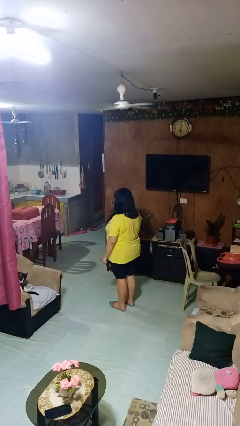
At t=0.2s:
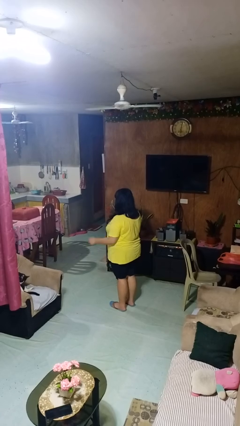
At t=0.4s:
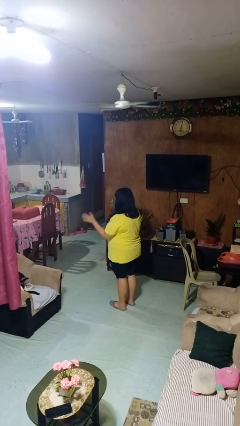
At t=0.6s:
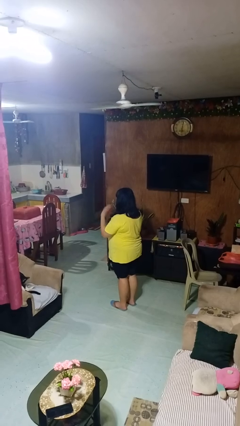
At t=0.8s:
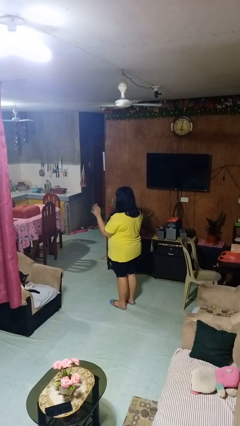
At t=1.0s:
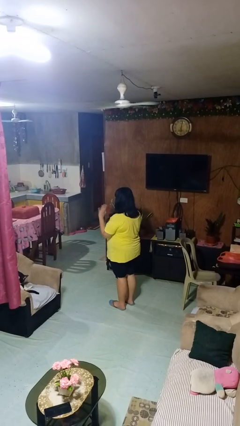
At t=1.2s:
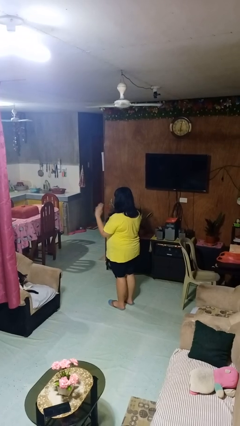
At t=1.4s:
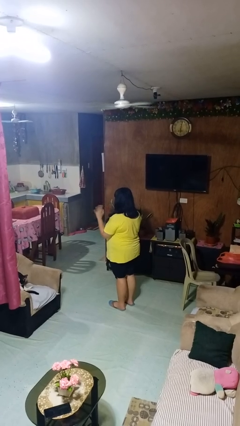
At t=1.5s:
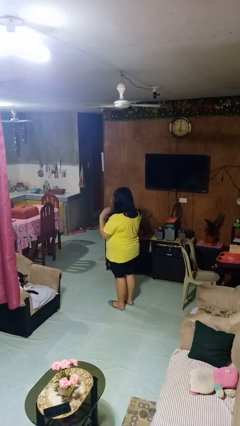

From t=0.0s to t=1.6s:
person waves at person

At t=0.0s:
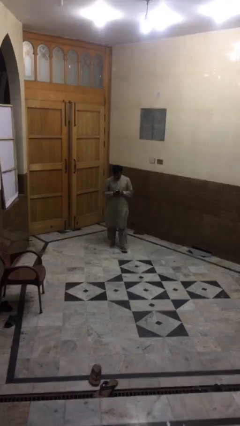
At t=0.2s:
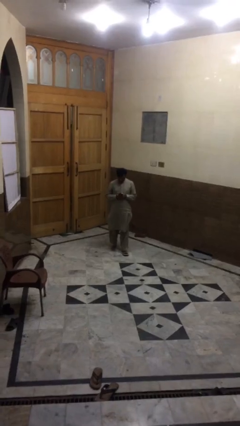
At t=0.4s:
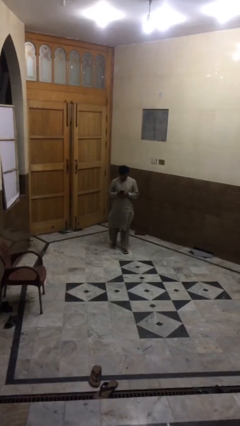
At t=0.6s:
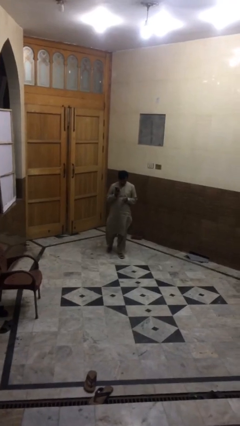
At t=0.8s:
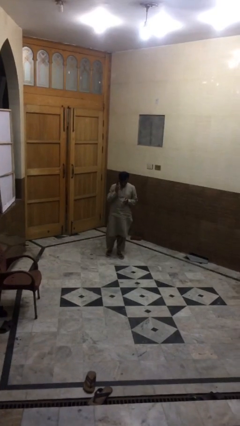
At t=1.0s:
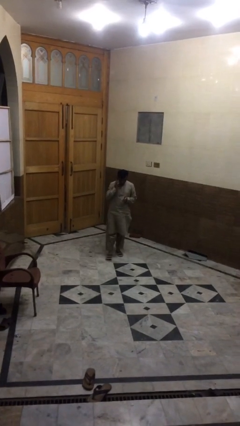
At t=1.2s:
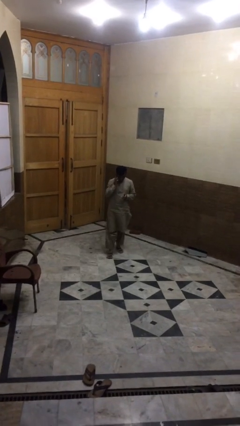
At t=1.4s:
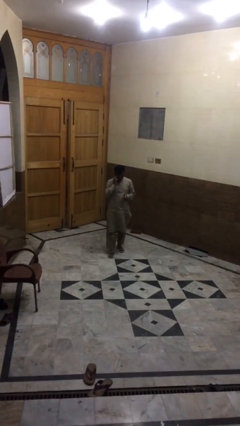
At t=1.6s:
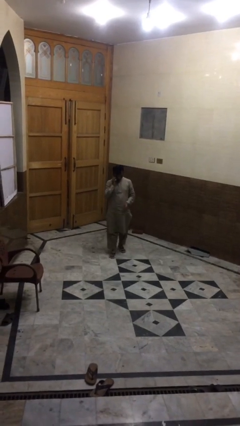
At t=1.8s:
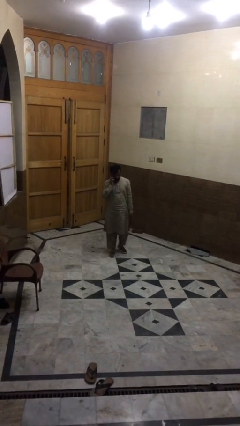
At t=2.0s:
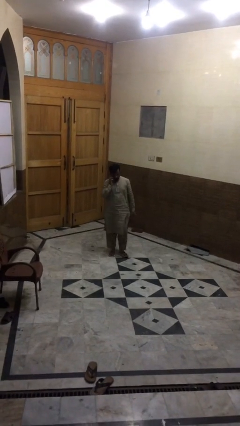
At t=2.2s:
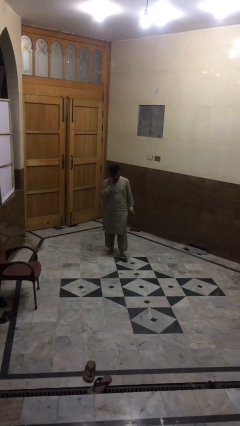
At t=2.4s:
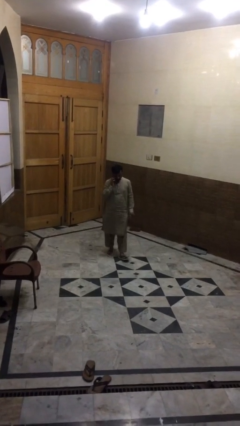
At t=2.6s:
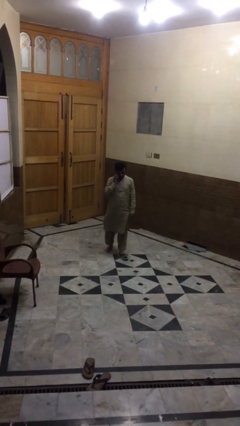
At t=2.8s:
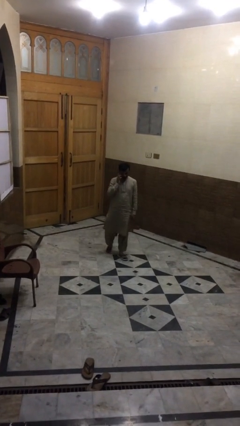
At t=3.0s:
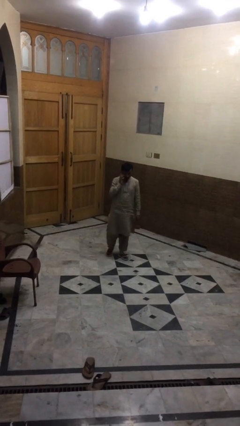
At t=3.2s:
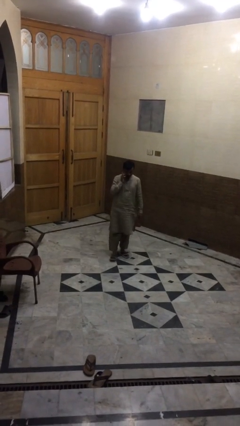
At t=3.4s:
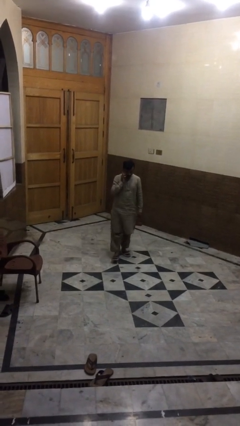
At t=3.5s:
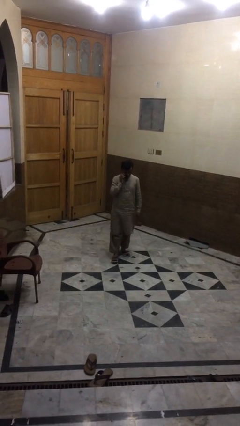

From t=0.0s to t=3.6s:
person talks on phone

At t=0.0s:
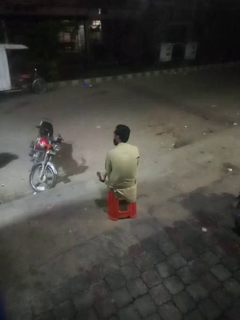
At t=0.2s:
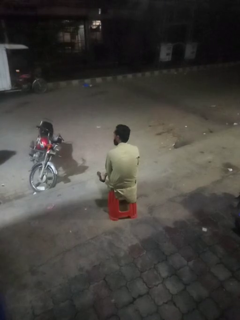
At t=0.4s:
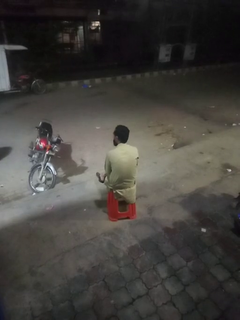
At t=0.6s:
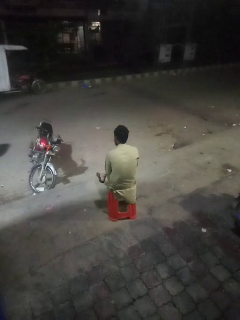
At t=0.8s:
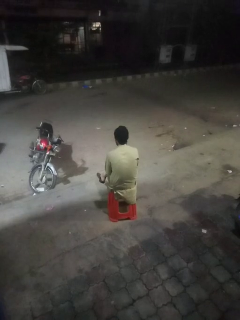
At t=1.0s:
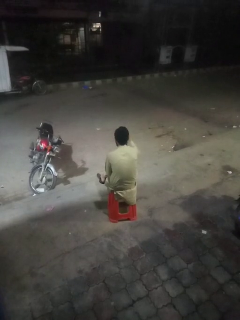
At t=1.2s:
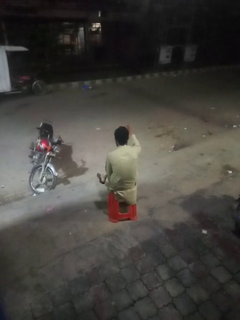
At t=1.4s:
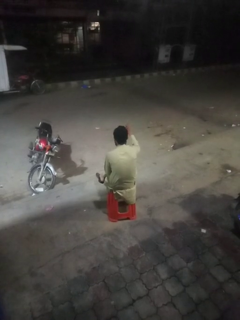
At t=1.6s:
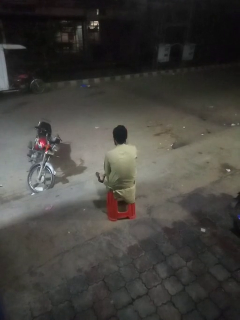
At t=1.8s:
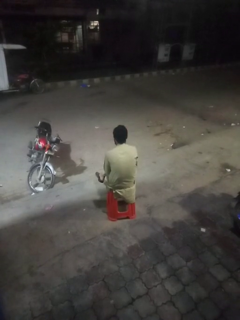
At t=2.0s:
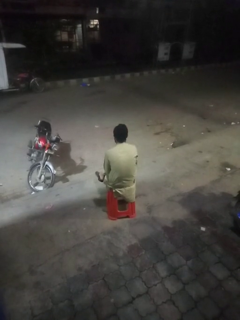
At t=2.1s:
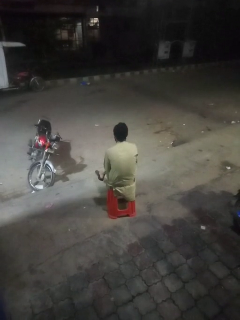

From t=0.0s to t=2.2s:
person gestures number one

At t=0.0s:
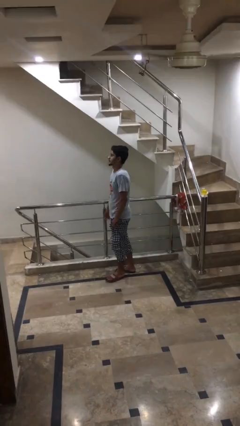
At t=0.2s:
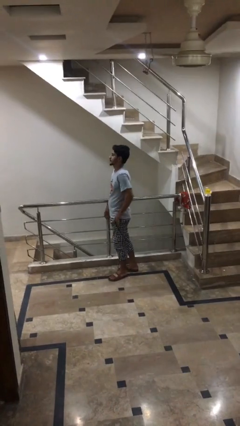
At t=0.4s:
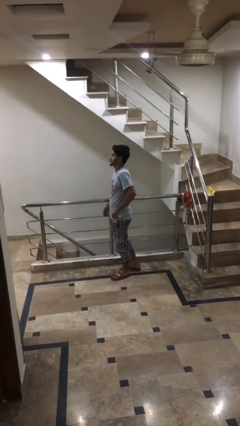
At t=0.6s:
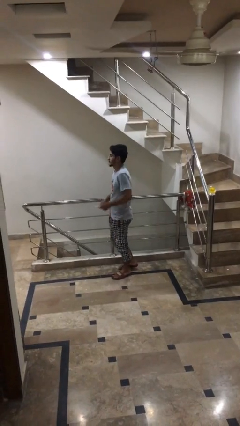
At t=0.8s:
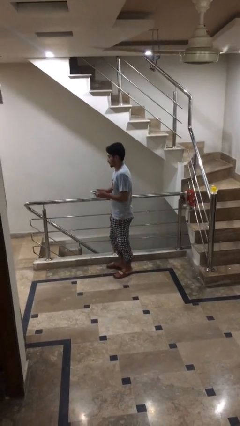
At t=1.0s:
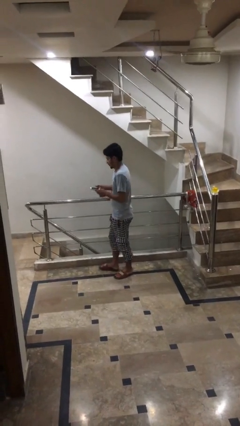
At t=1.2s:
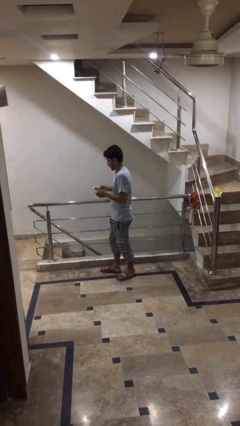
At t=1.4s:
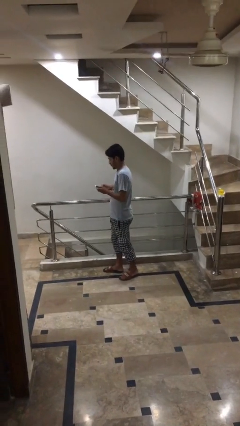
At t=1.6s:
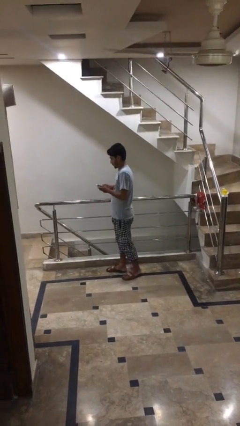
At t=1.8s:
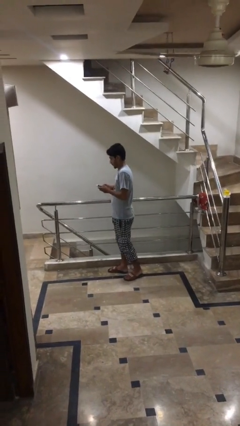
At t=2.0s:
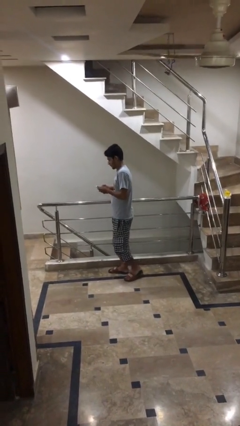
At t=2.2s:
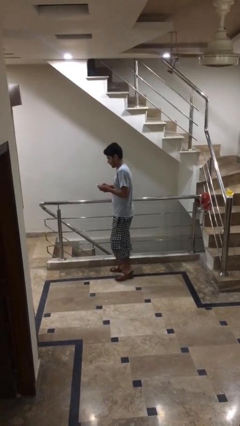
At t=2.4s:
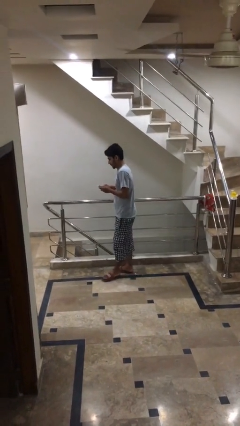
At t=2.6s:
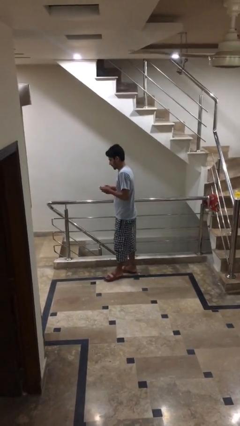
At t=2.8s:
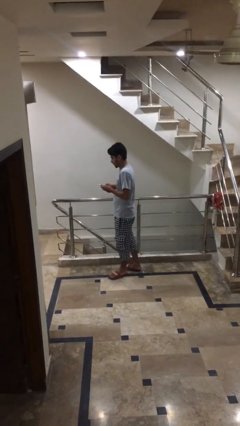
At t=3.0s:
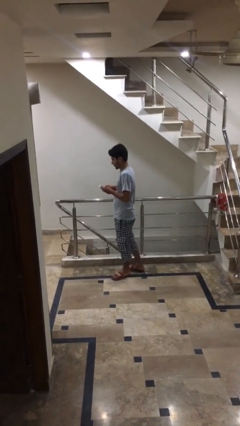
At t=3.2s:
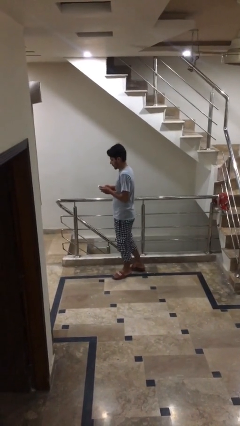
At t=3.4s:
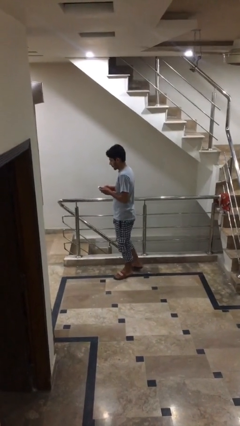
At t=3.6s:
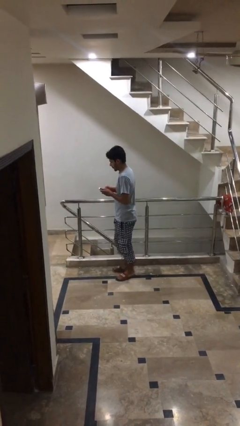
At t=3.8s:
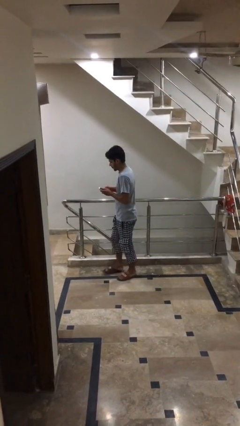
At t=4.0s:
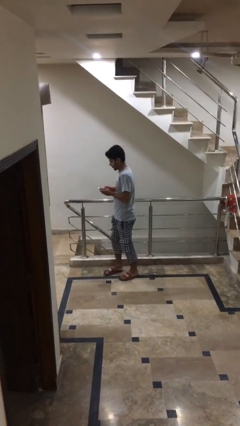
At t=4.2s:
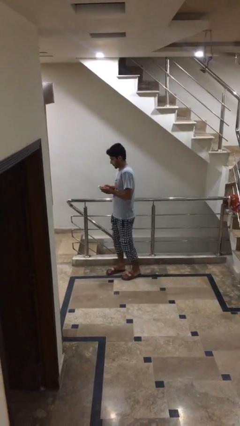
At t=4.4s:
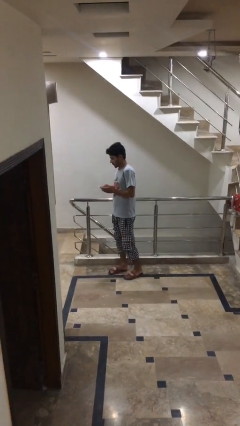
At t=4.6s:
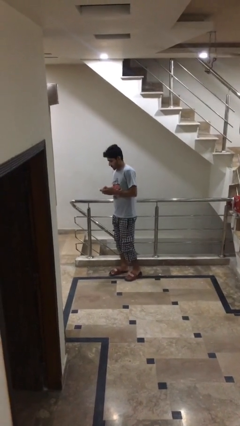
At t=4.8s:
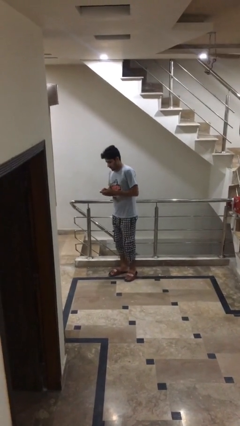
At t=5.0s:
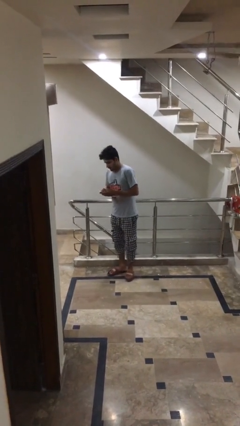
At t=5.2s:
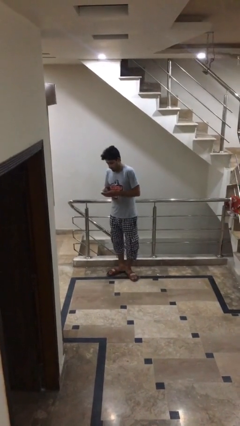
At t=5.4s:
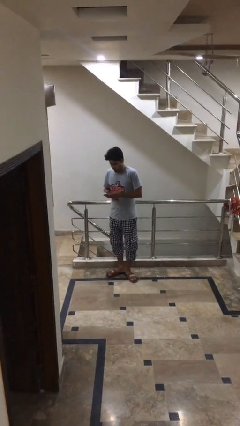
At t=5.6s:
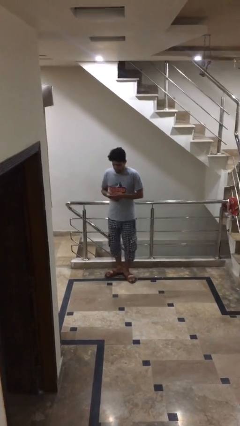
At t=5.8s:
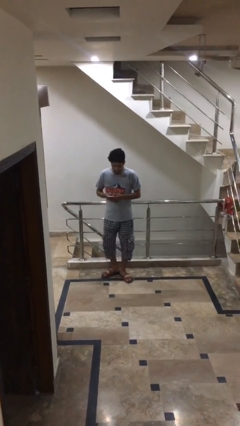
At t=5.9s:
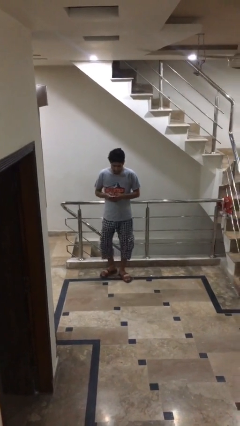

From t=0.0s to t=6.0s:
person texts on phone

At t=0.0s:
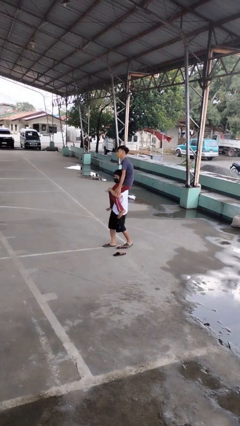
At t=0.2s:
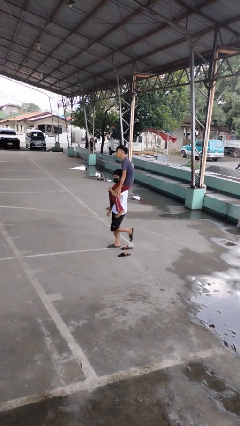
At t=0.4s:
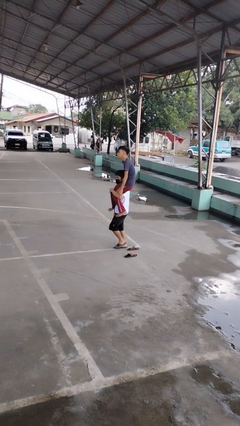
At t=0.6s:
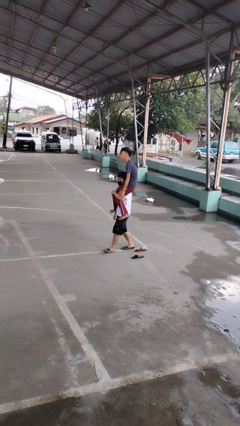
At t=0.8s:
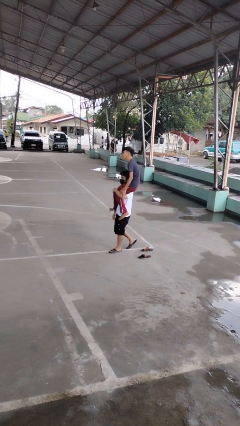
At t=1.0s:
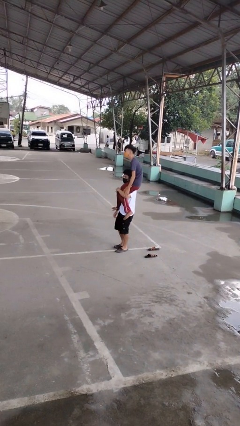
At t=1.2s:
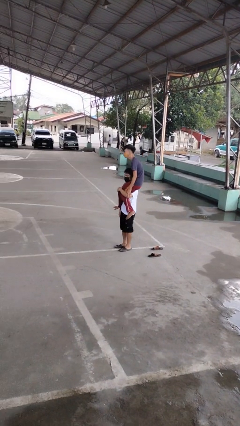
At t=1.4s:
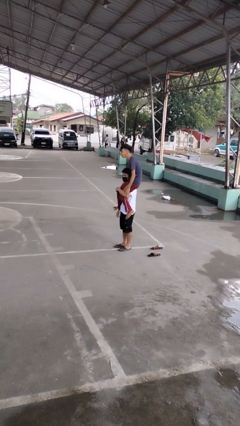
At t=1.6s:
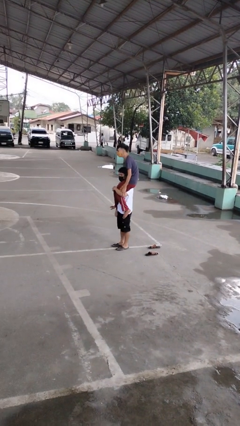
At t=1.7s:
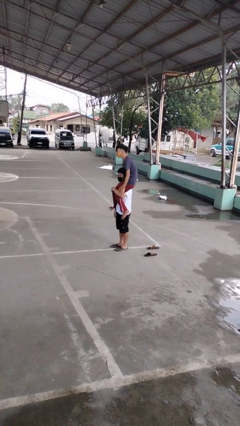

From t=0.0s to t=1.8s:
person carries person on shoulders

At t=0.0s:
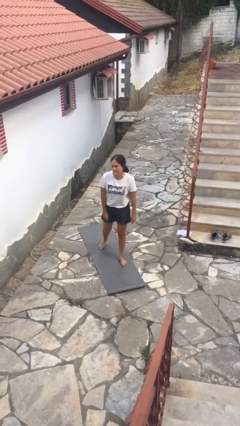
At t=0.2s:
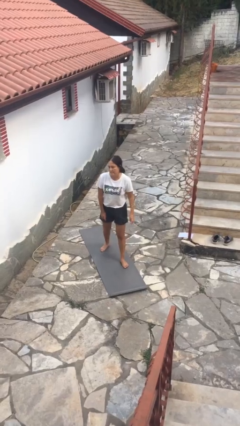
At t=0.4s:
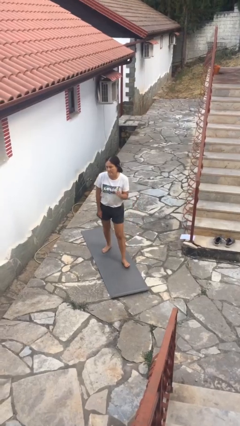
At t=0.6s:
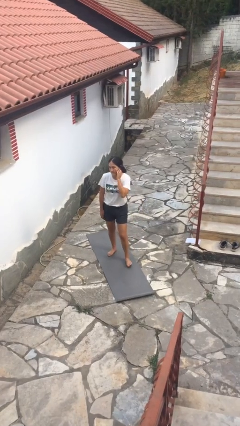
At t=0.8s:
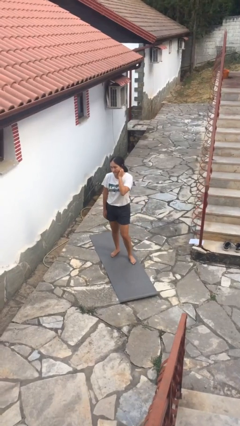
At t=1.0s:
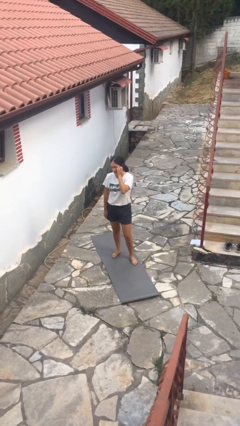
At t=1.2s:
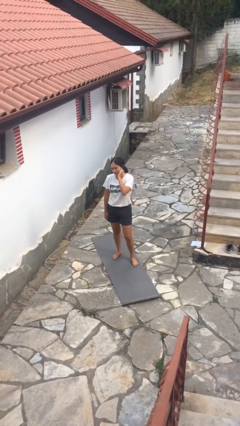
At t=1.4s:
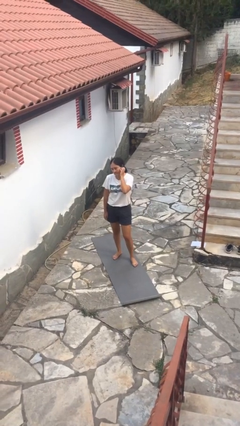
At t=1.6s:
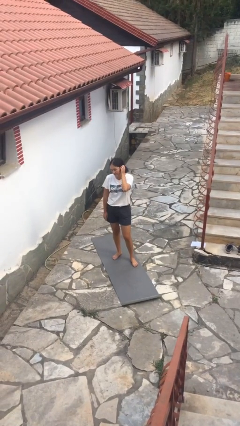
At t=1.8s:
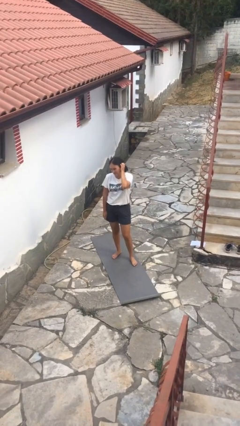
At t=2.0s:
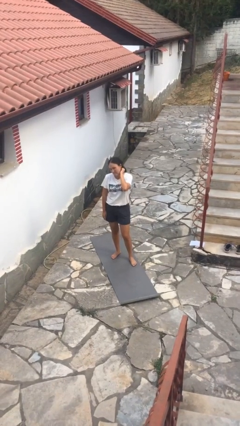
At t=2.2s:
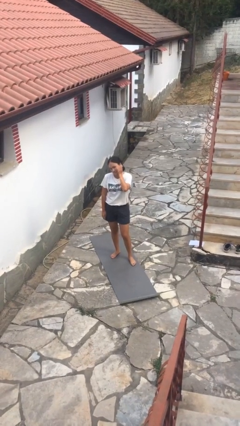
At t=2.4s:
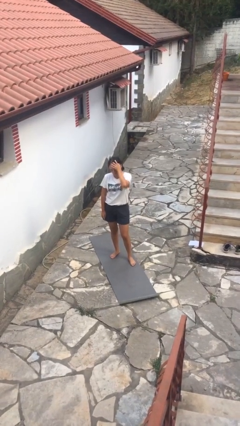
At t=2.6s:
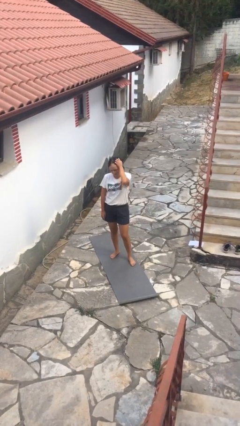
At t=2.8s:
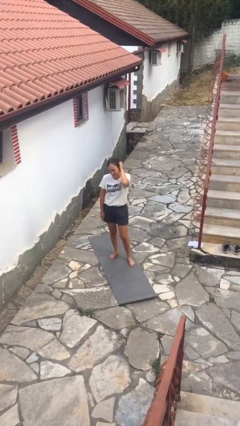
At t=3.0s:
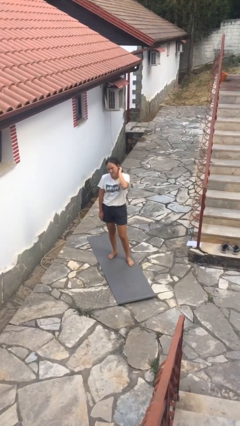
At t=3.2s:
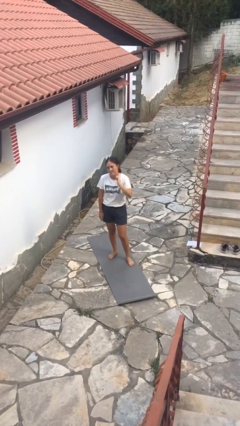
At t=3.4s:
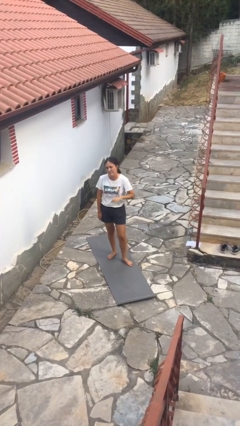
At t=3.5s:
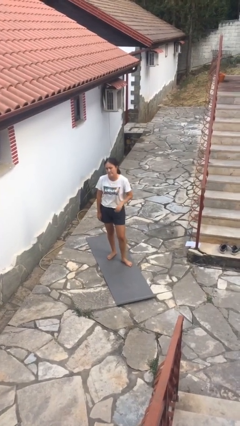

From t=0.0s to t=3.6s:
person scratches face
